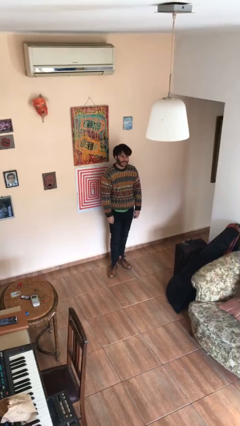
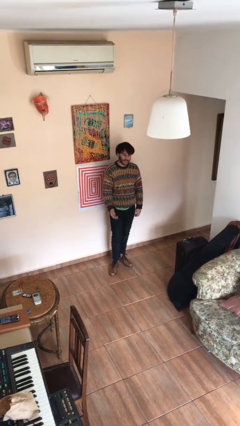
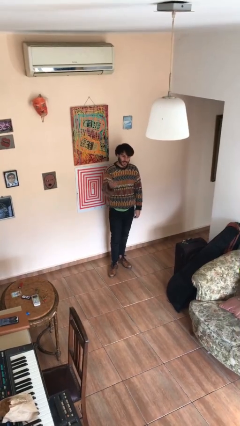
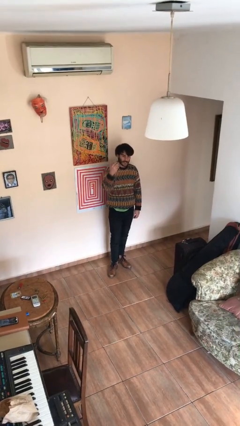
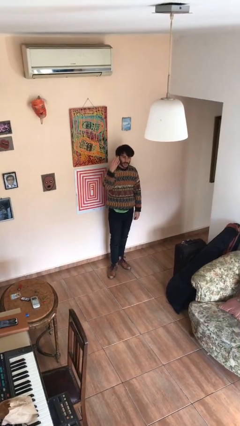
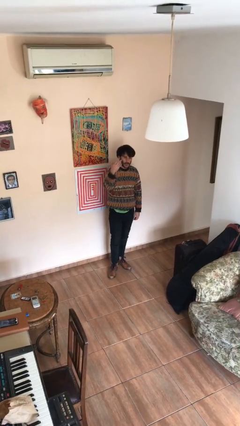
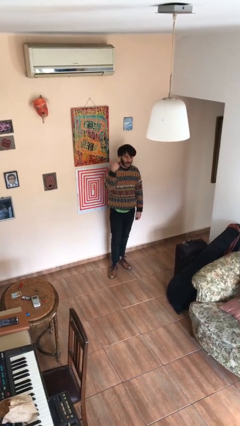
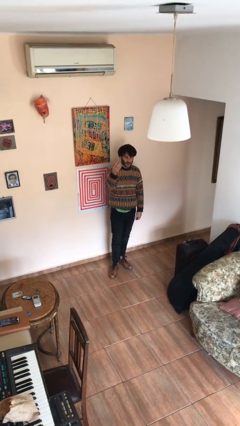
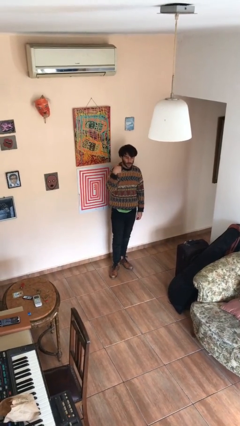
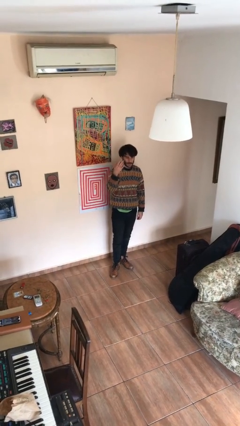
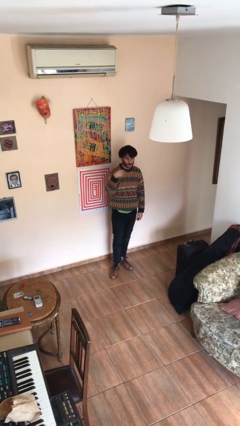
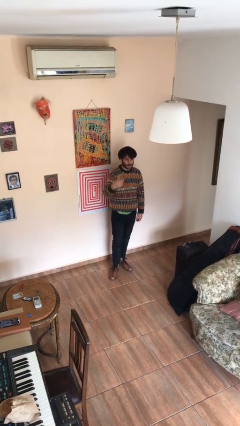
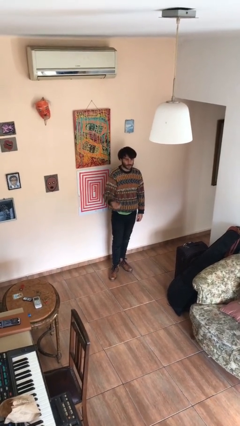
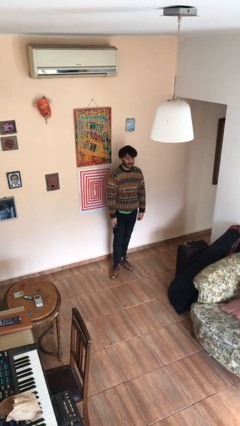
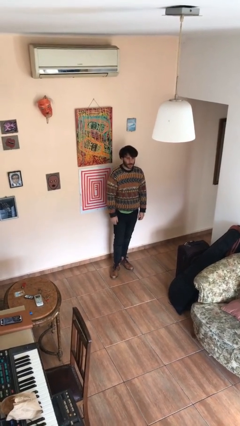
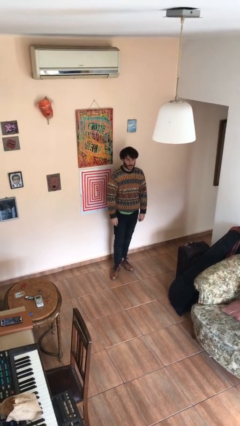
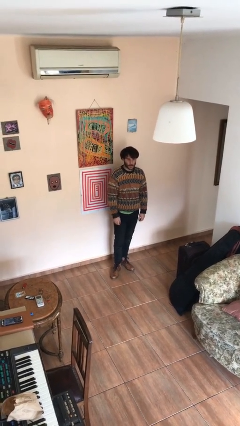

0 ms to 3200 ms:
person gestures come here

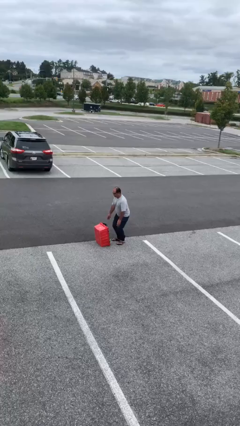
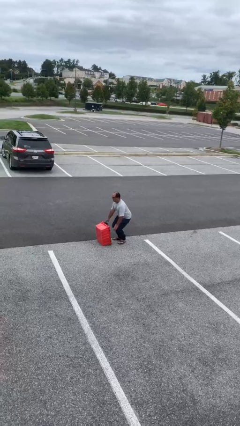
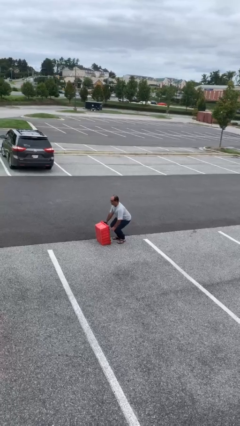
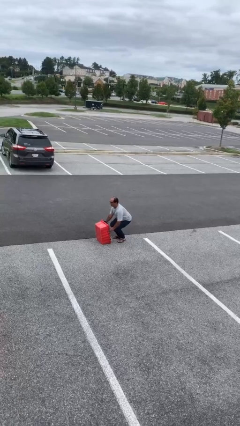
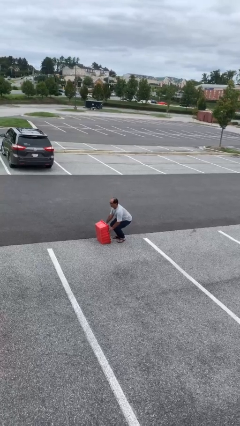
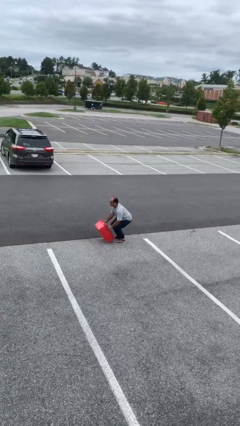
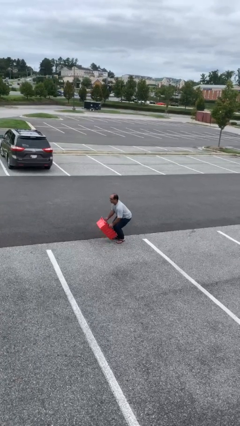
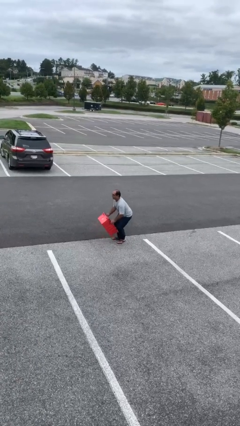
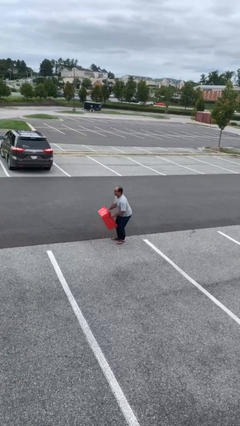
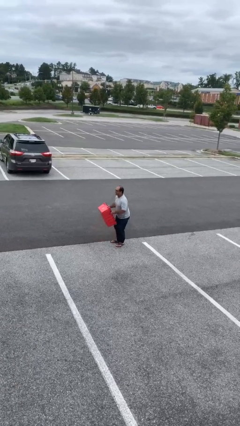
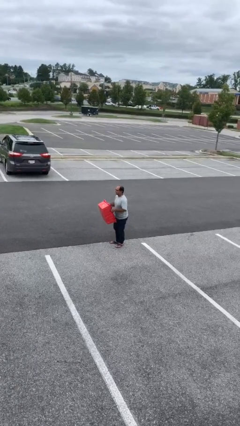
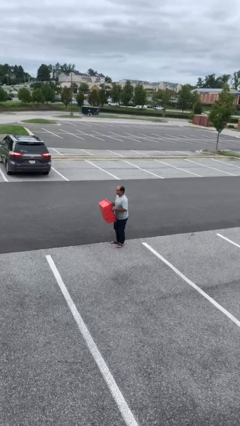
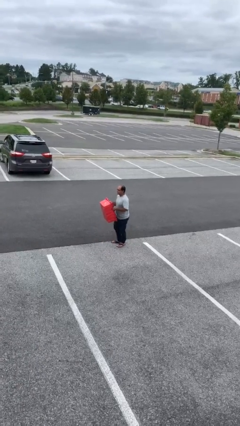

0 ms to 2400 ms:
person picks up object from floor

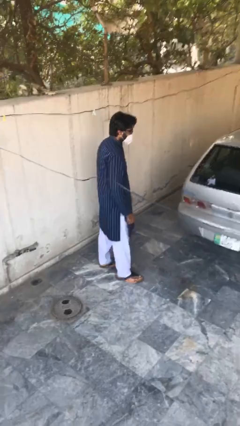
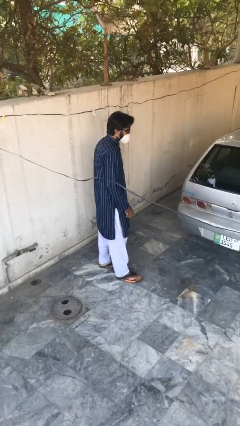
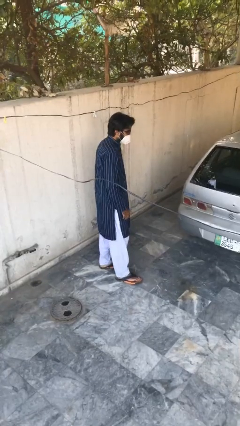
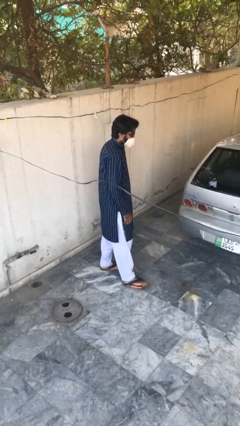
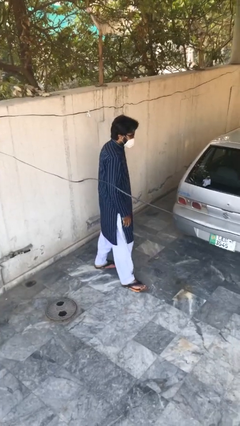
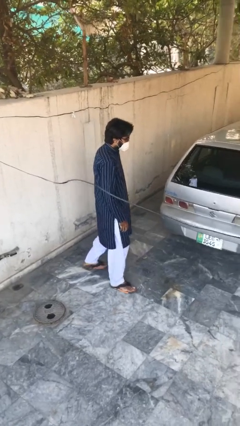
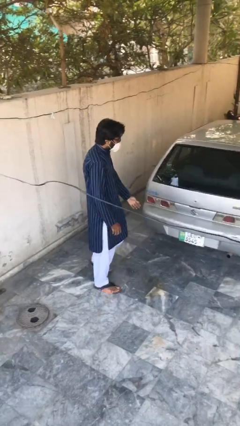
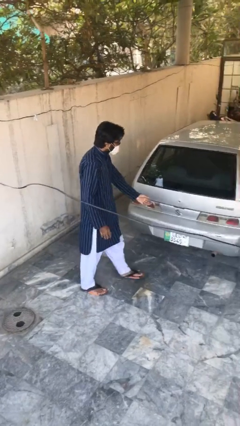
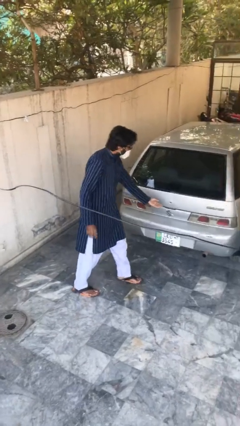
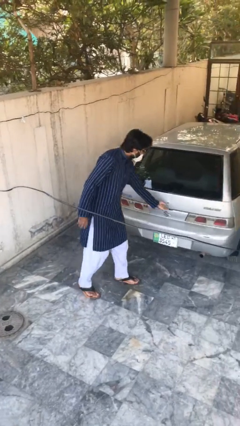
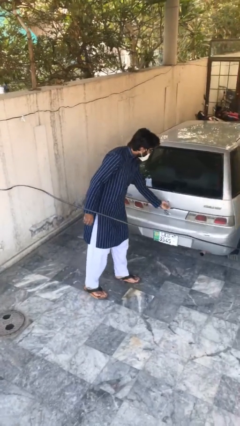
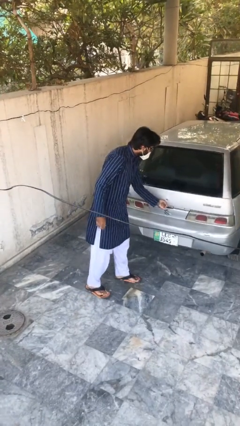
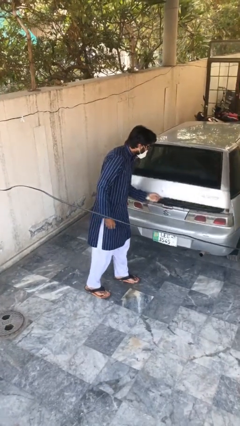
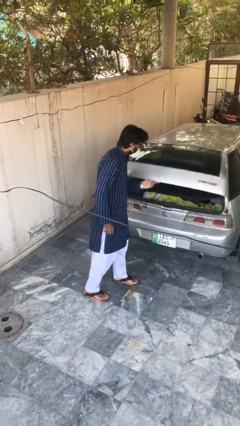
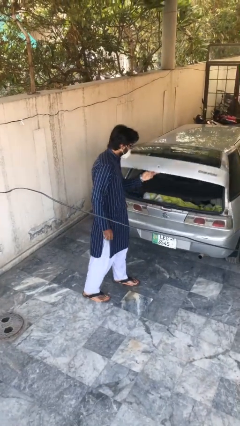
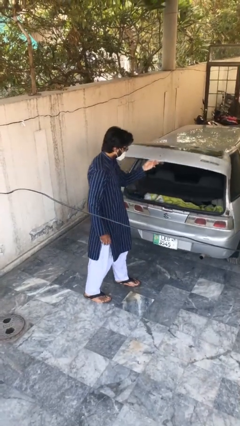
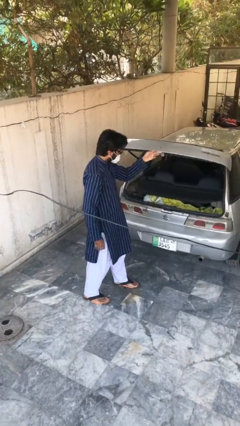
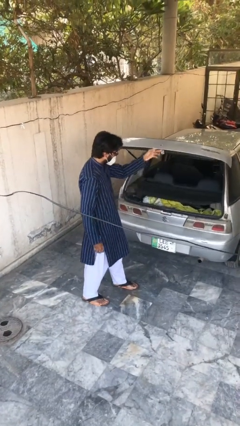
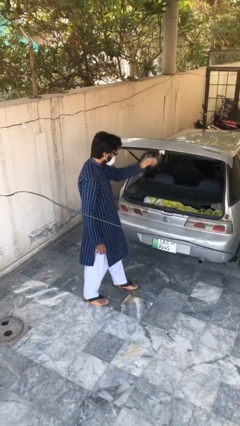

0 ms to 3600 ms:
person opens car trunk

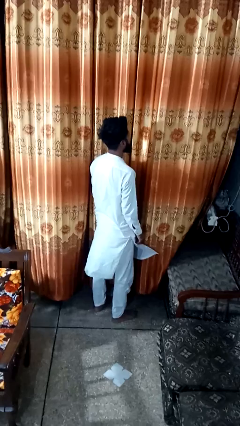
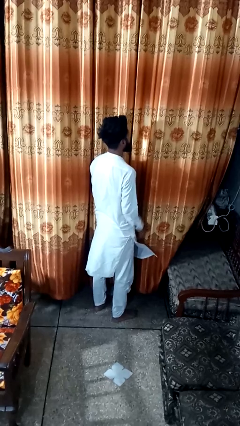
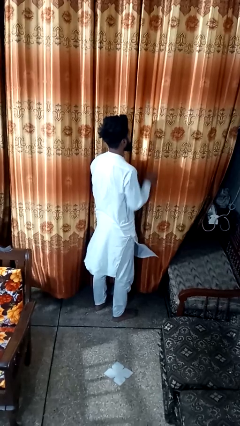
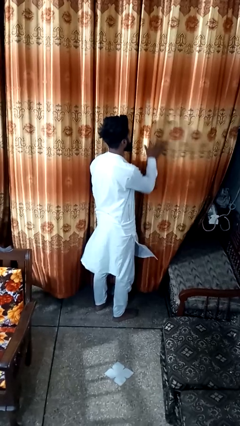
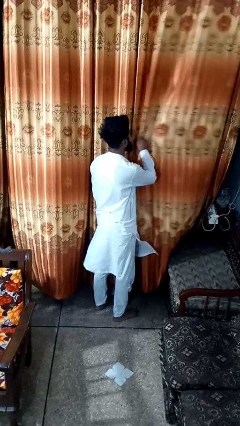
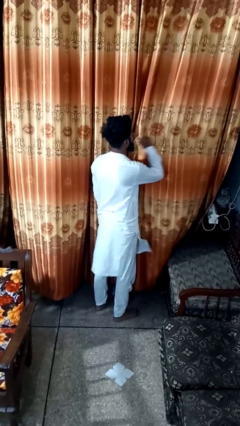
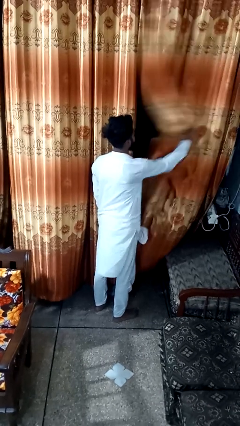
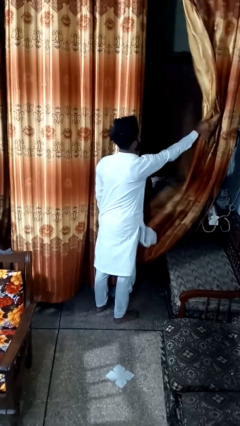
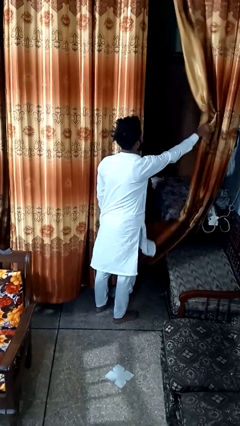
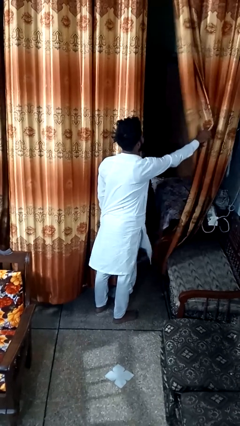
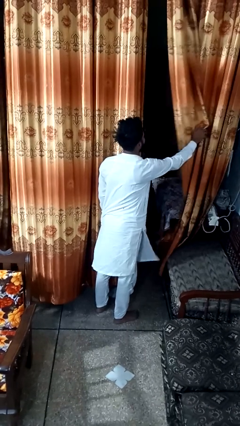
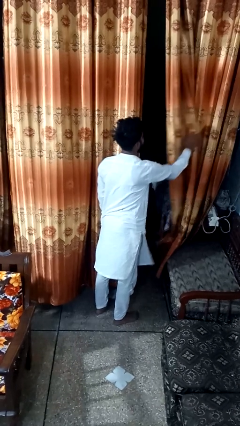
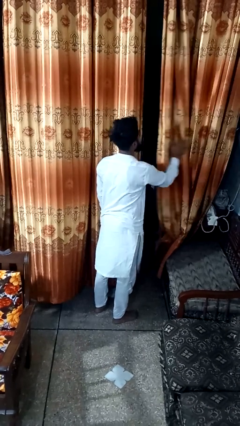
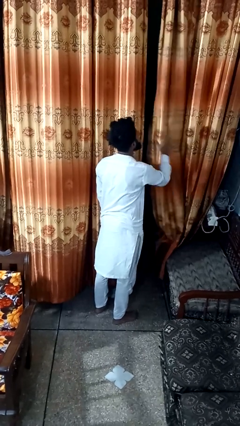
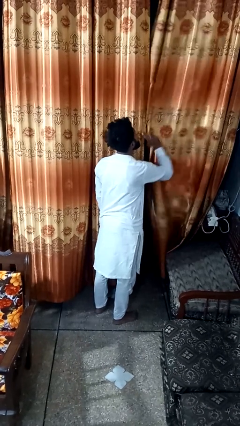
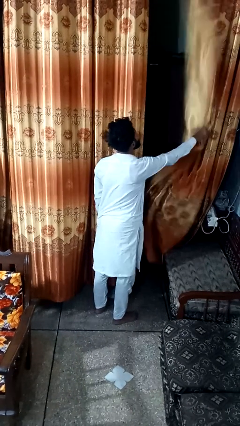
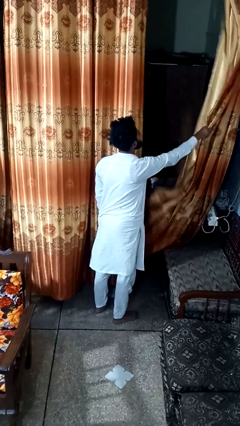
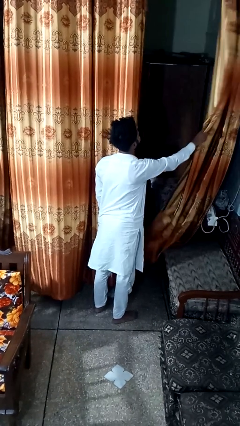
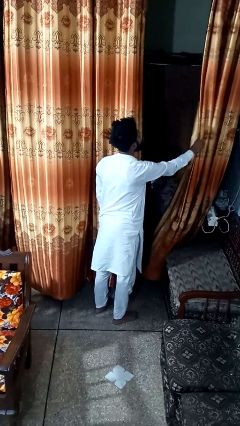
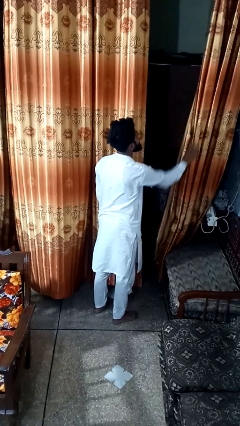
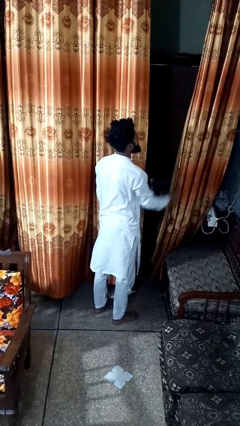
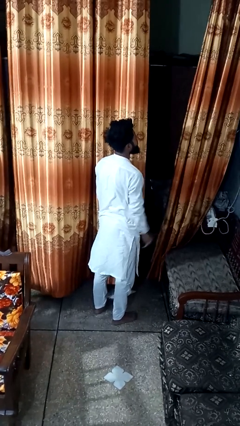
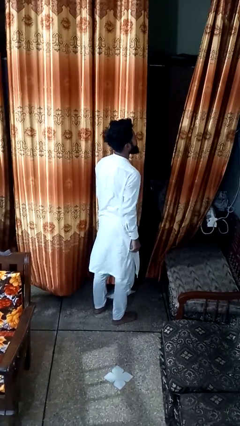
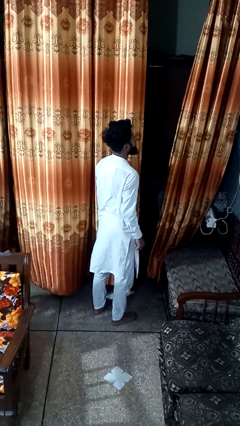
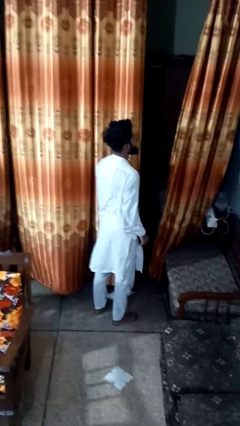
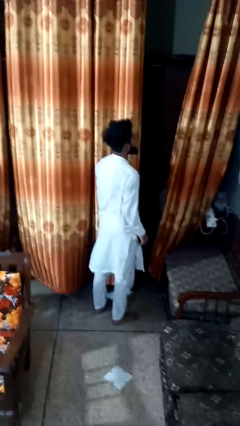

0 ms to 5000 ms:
person opens curtains

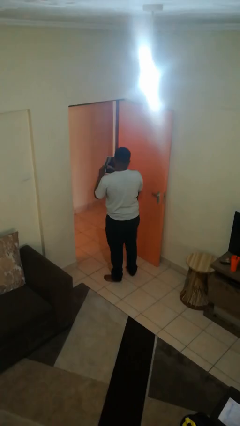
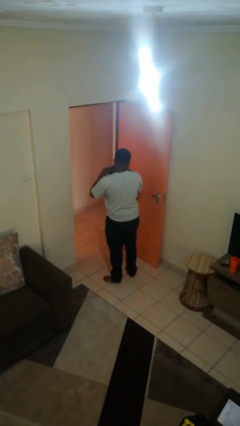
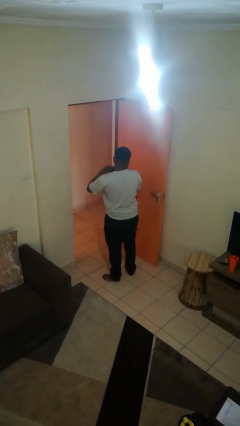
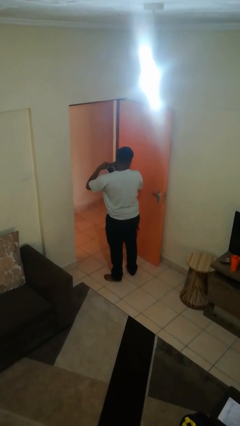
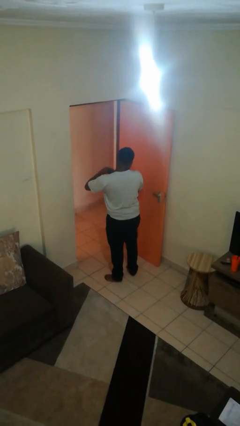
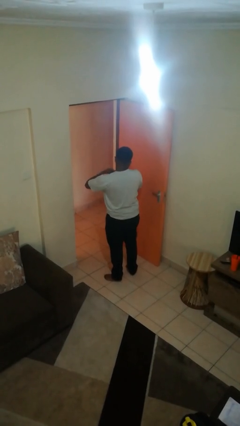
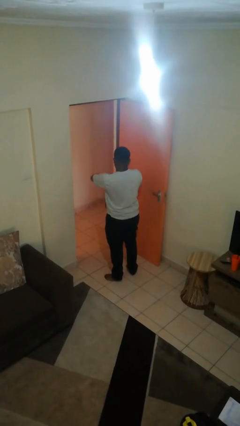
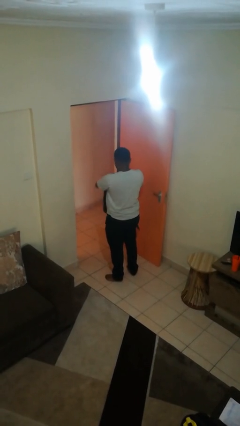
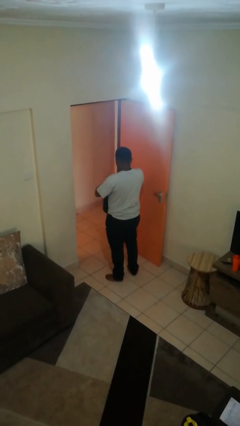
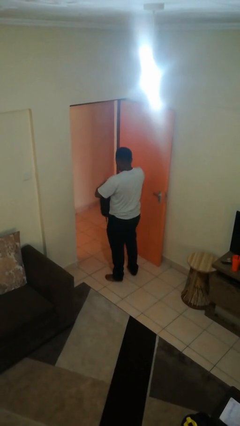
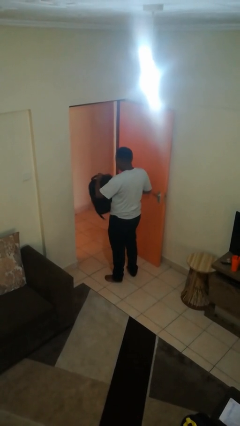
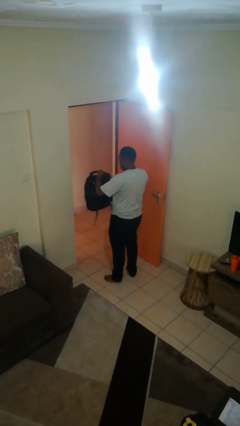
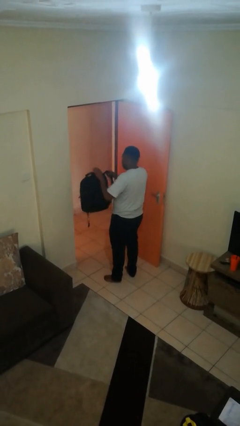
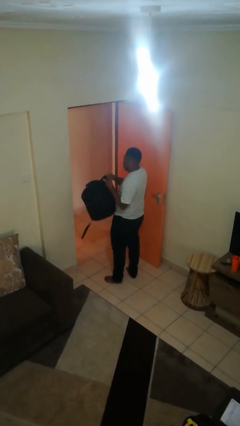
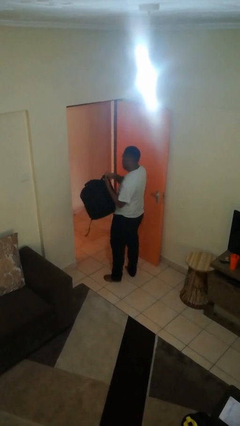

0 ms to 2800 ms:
person puts object into backpack

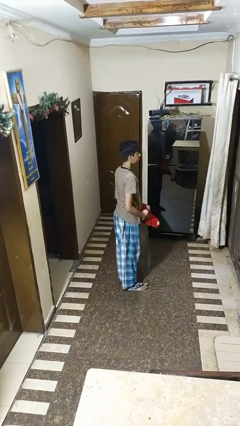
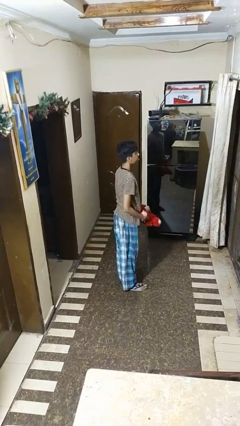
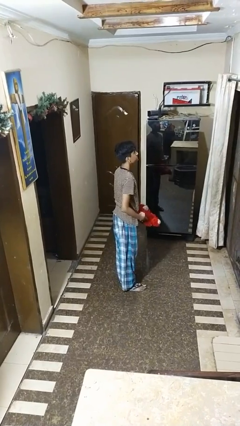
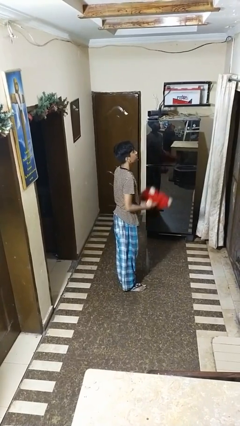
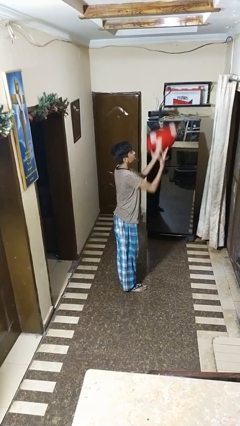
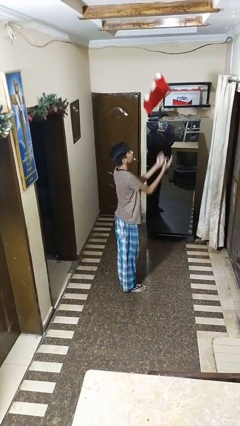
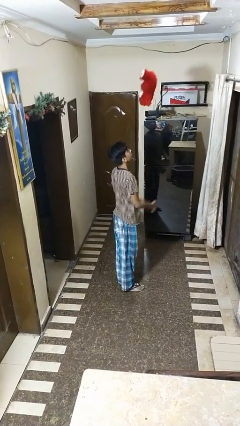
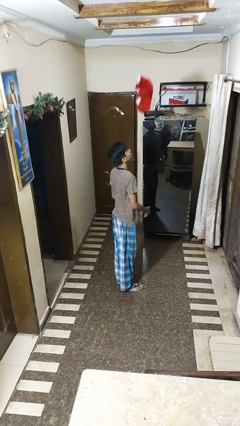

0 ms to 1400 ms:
person drops object
